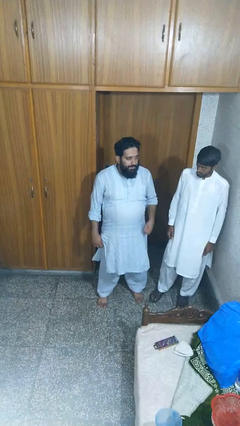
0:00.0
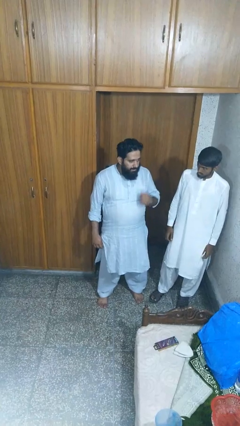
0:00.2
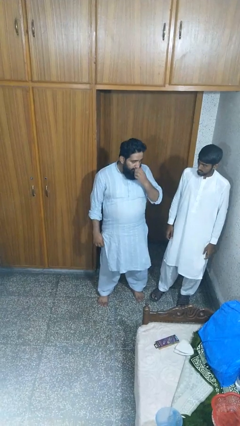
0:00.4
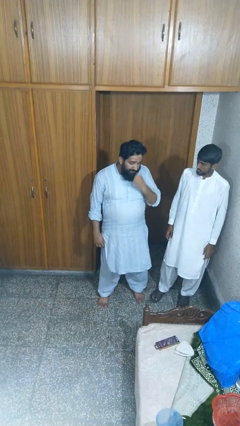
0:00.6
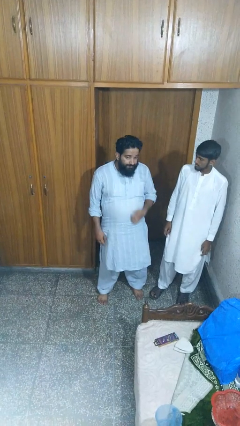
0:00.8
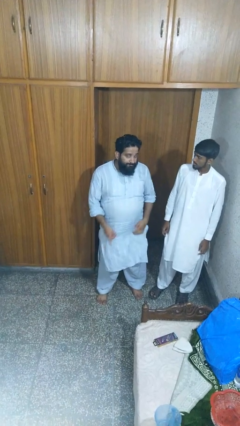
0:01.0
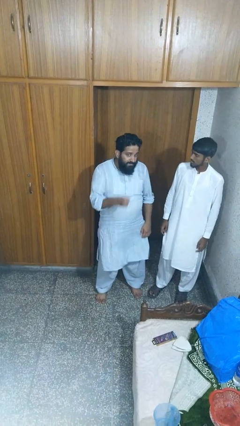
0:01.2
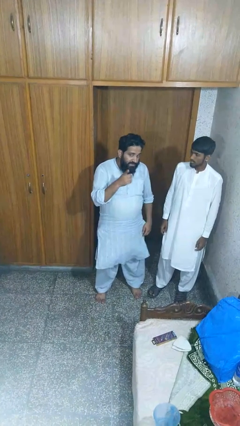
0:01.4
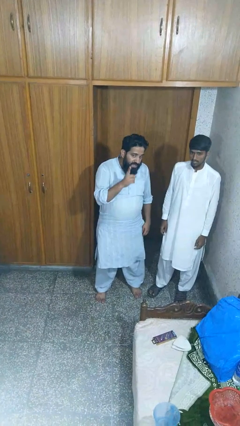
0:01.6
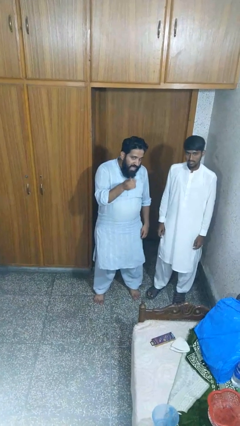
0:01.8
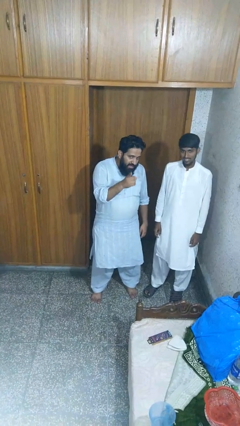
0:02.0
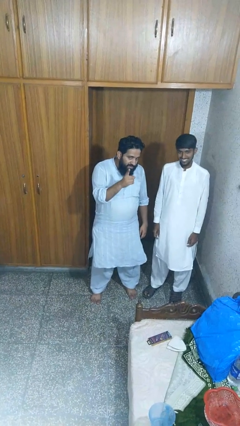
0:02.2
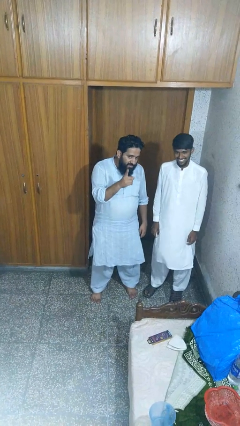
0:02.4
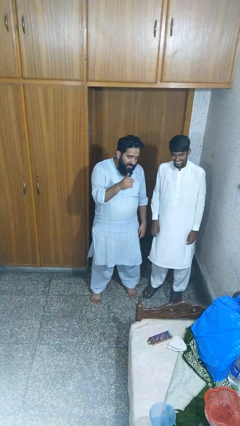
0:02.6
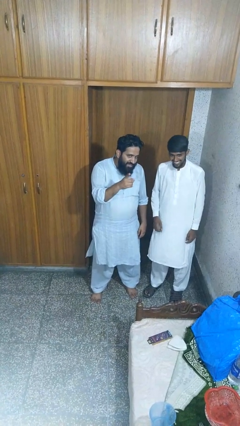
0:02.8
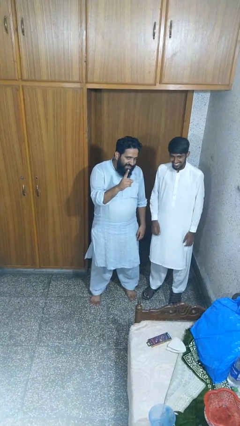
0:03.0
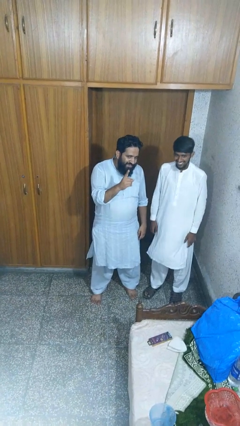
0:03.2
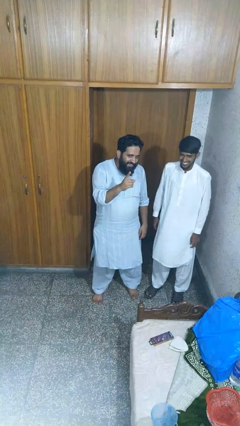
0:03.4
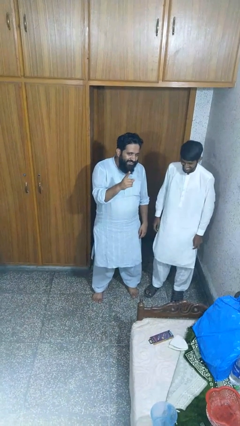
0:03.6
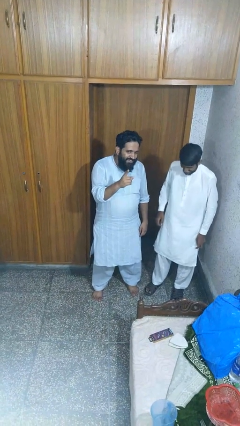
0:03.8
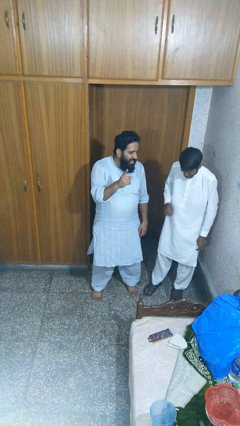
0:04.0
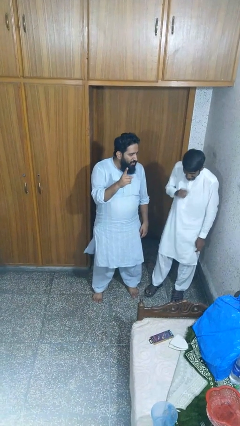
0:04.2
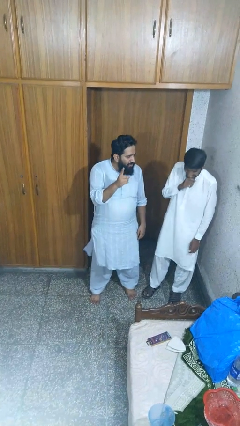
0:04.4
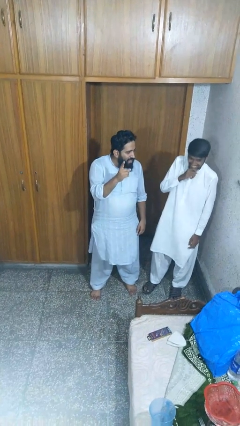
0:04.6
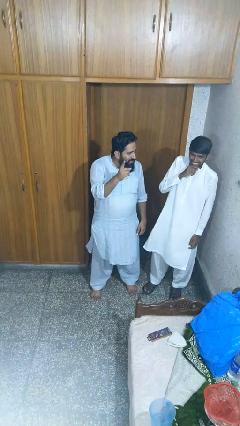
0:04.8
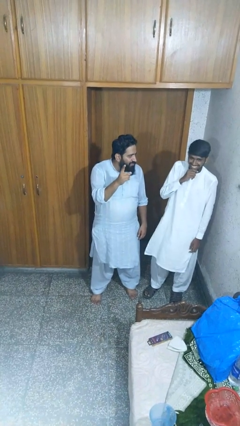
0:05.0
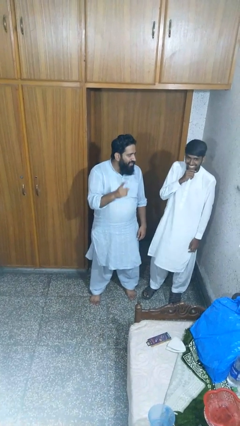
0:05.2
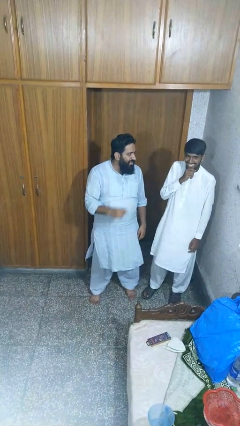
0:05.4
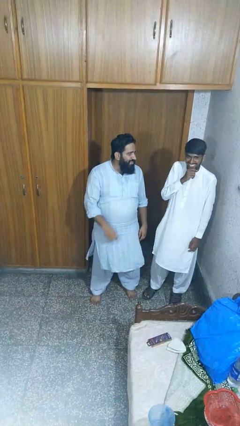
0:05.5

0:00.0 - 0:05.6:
person points at person

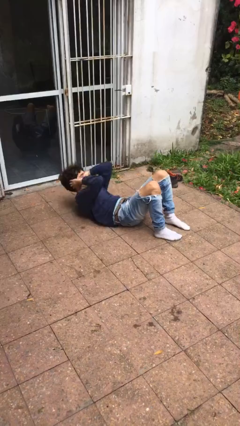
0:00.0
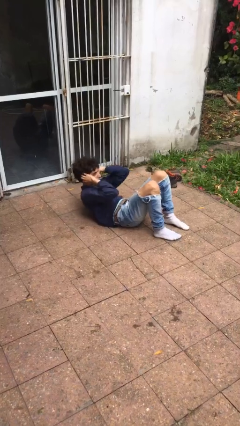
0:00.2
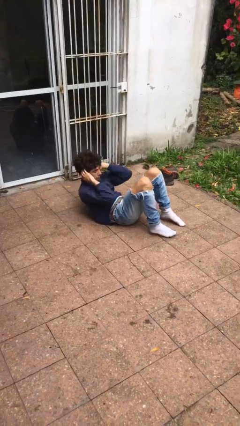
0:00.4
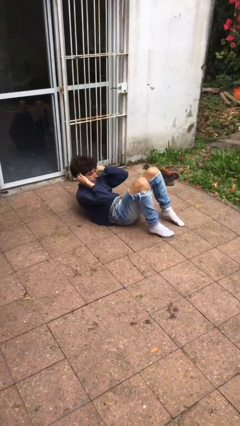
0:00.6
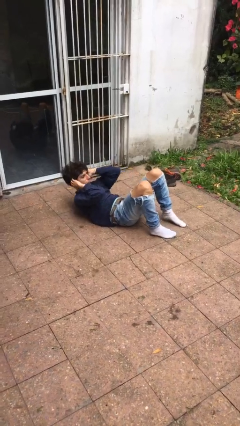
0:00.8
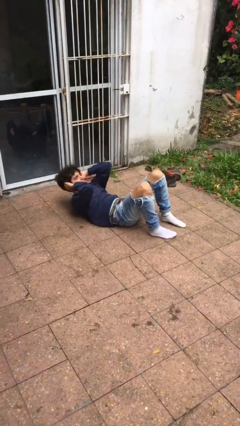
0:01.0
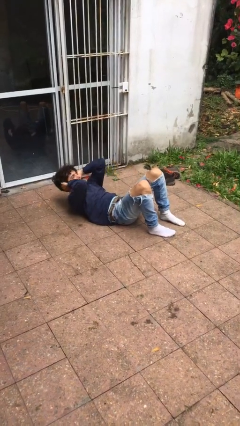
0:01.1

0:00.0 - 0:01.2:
person exercises with situp

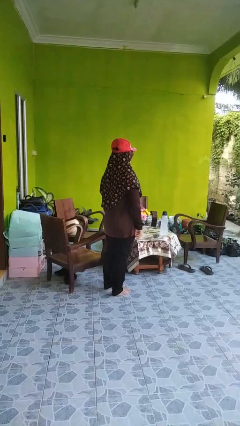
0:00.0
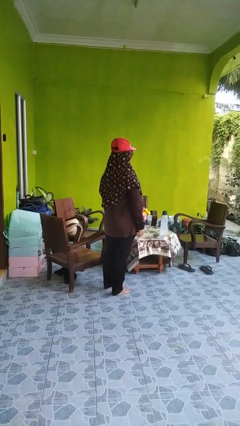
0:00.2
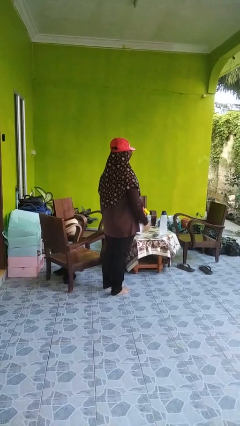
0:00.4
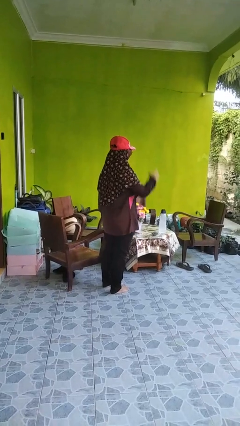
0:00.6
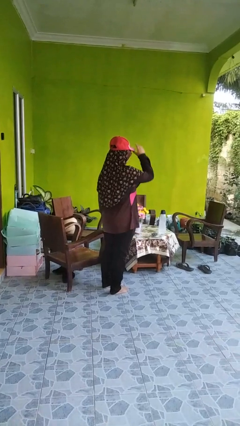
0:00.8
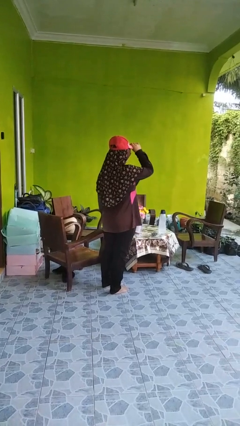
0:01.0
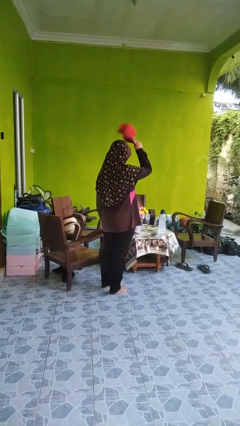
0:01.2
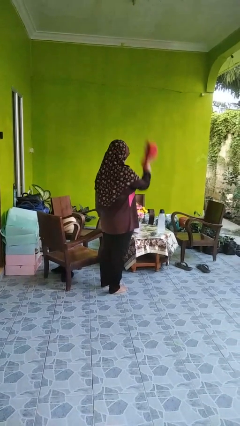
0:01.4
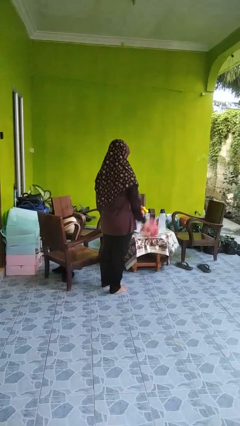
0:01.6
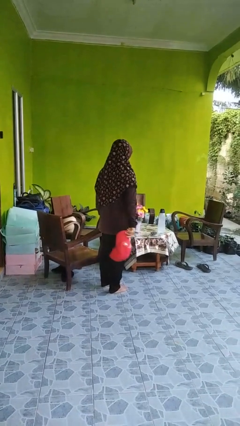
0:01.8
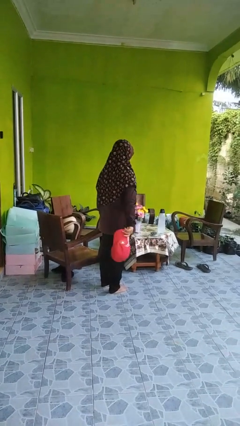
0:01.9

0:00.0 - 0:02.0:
person takes off hat

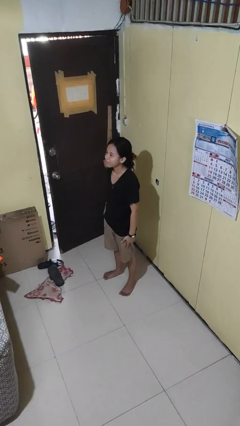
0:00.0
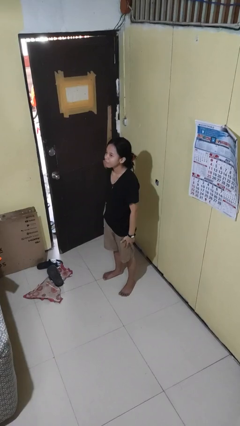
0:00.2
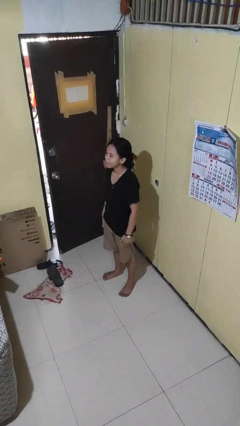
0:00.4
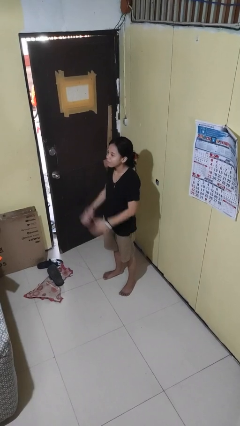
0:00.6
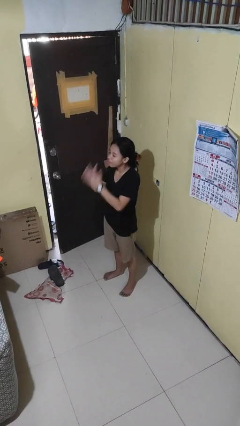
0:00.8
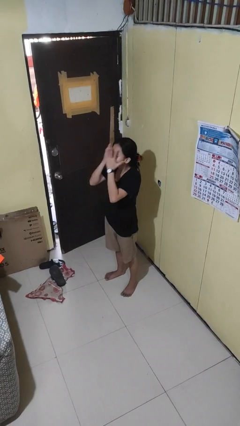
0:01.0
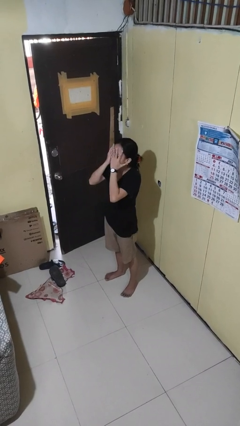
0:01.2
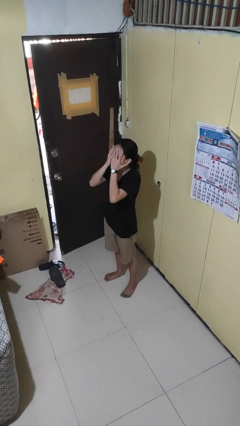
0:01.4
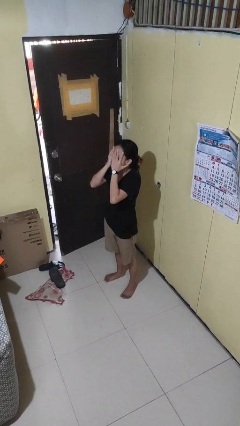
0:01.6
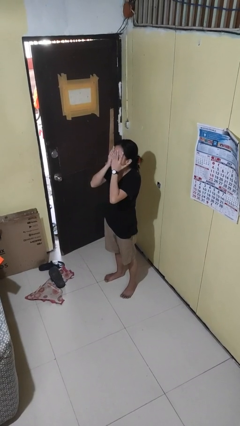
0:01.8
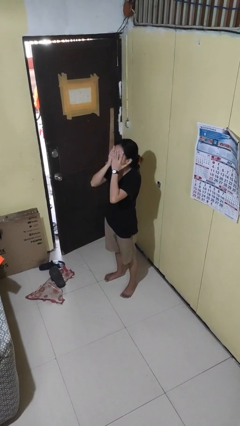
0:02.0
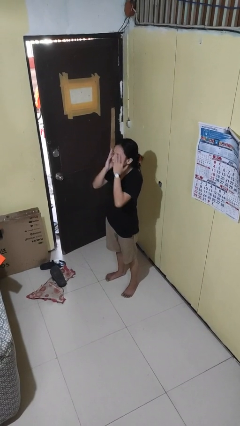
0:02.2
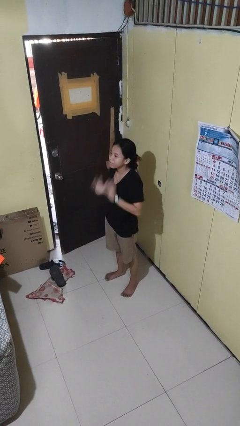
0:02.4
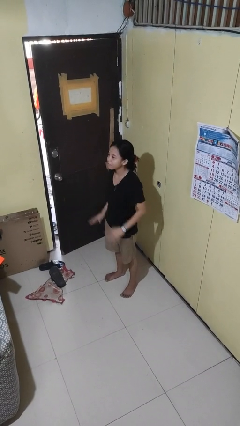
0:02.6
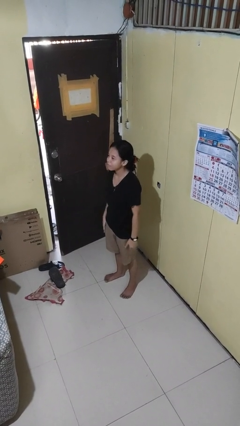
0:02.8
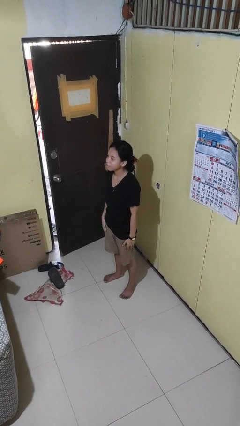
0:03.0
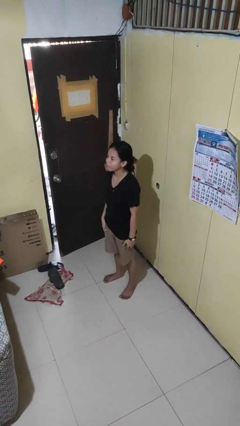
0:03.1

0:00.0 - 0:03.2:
person covers face with hands

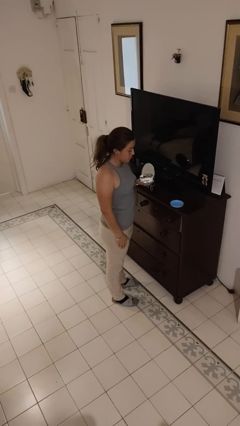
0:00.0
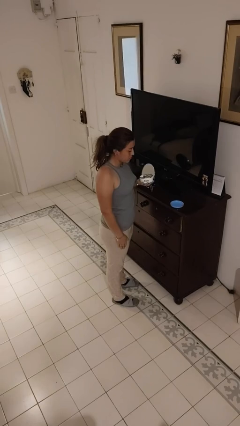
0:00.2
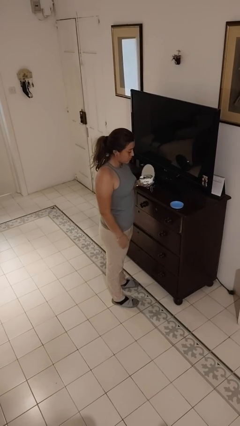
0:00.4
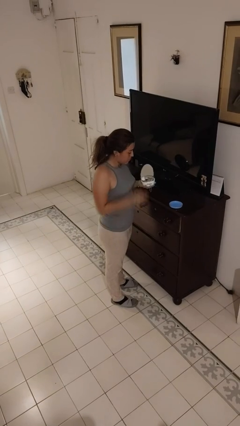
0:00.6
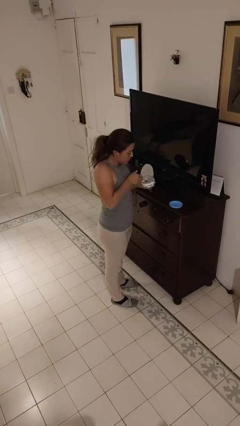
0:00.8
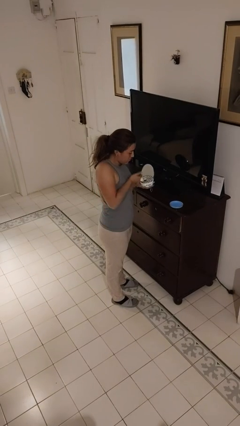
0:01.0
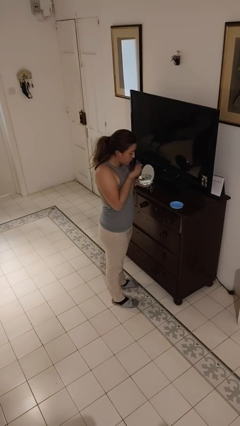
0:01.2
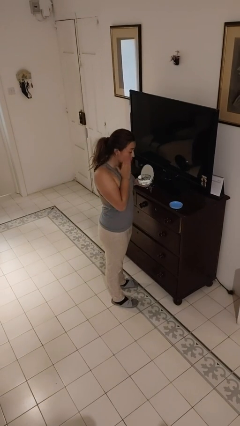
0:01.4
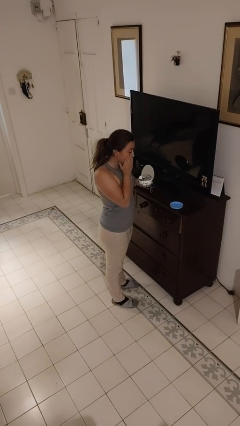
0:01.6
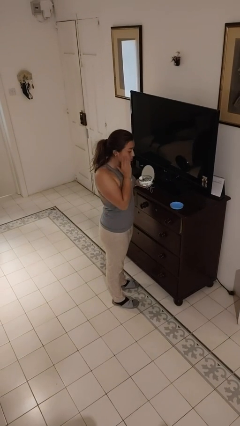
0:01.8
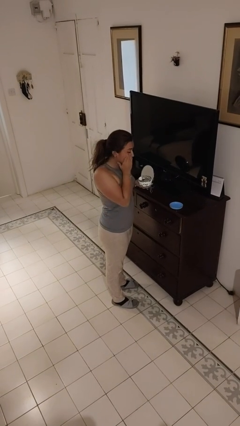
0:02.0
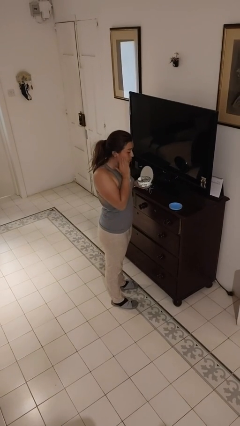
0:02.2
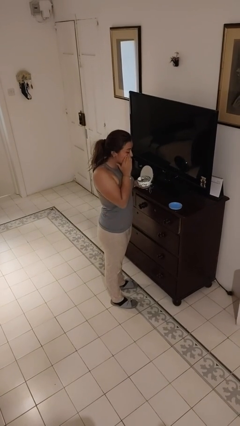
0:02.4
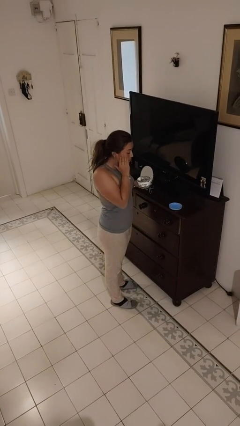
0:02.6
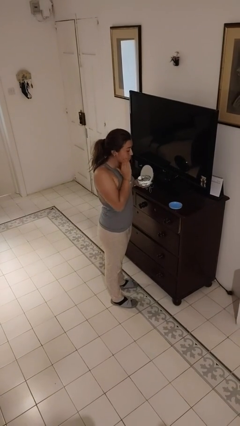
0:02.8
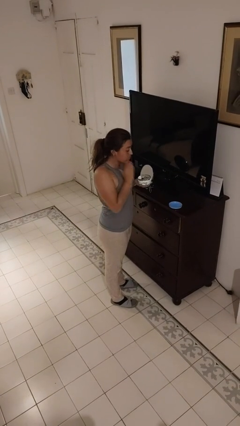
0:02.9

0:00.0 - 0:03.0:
person applies facial moisturizer

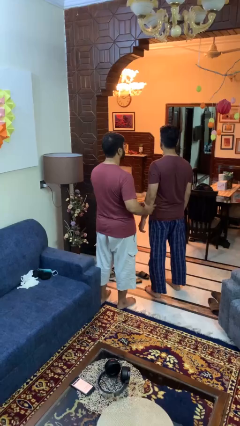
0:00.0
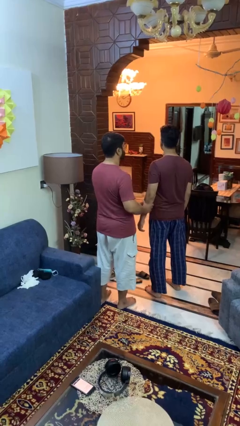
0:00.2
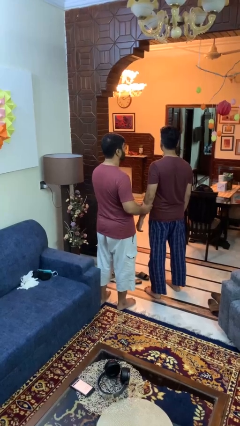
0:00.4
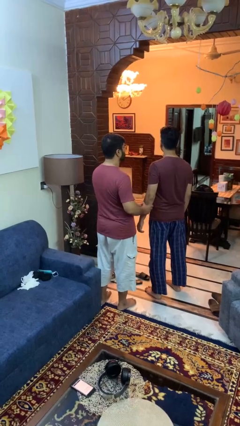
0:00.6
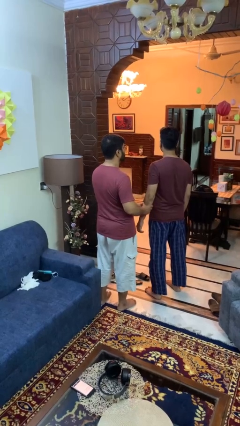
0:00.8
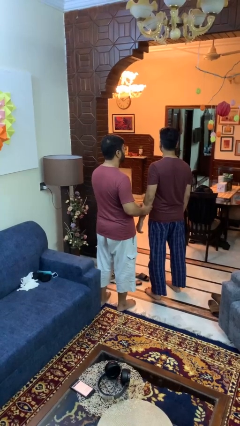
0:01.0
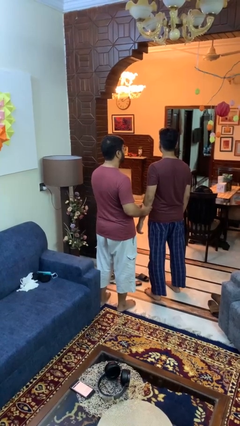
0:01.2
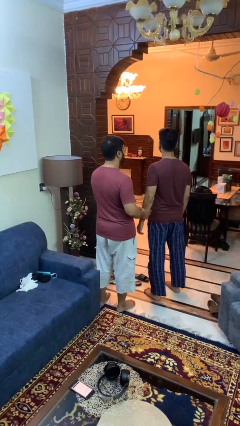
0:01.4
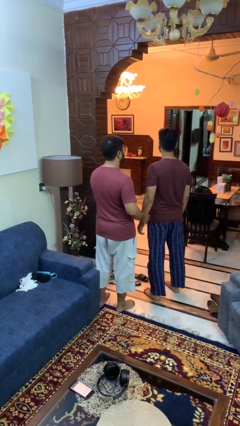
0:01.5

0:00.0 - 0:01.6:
person grabs person by forearm

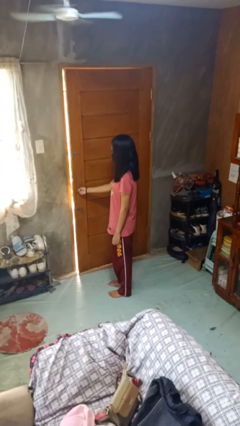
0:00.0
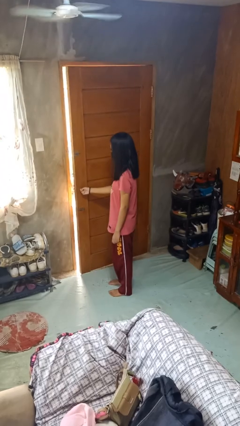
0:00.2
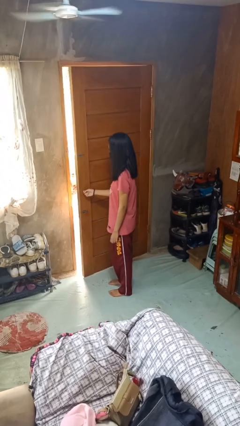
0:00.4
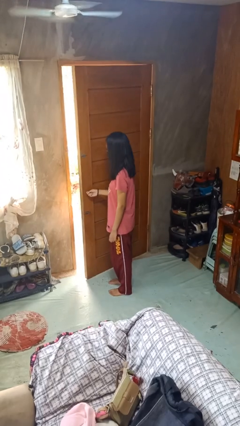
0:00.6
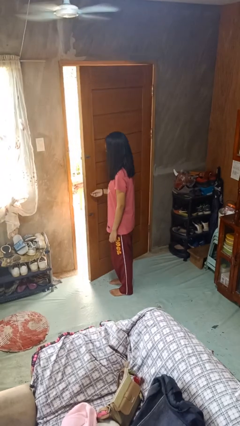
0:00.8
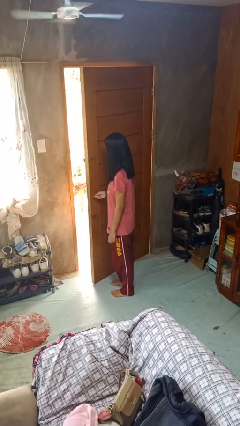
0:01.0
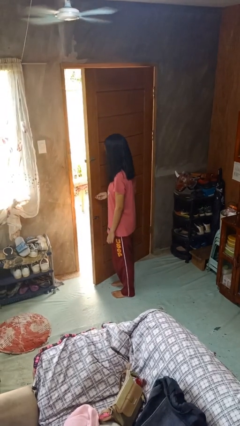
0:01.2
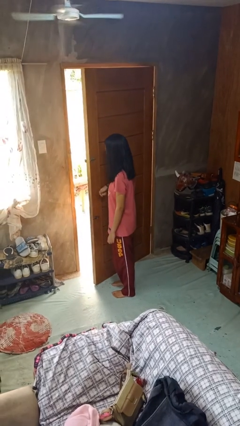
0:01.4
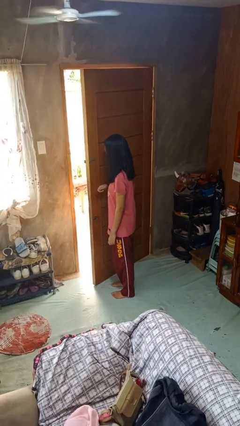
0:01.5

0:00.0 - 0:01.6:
person opens facility door
